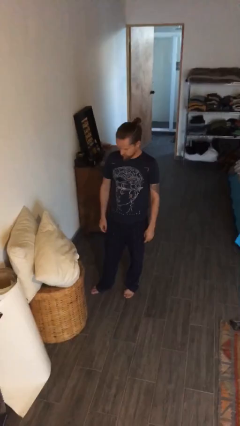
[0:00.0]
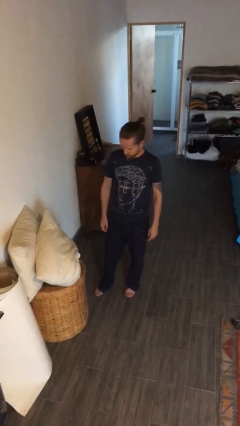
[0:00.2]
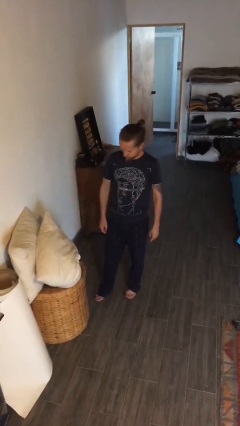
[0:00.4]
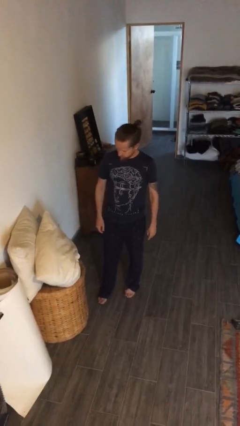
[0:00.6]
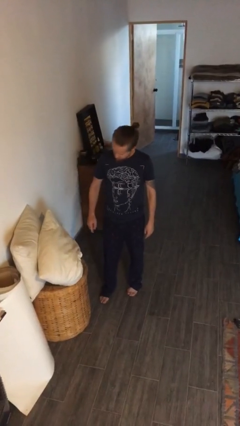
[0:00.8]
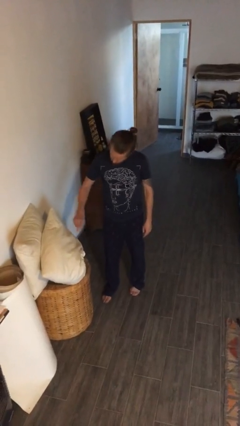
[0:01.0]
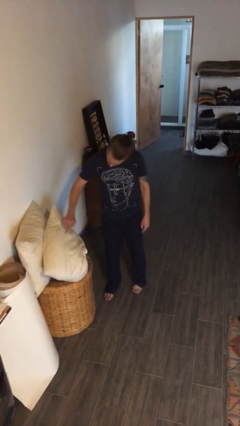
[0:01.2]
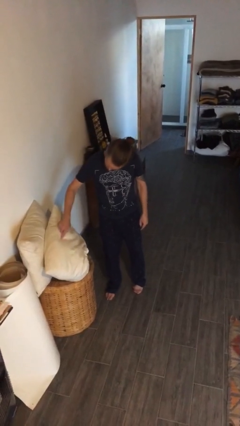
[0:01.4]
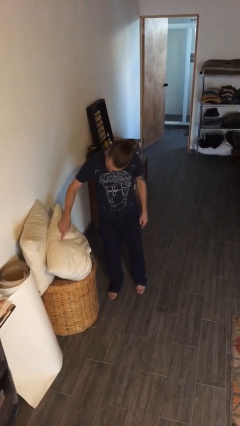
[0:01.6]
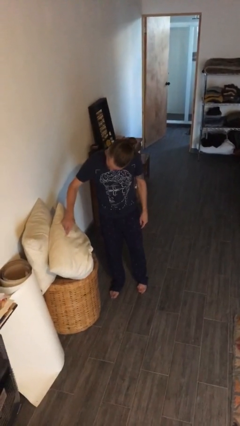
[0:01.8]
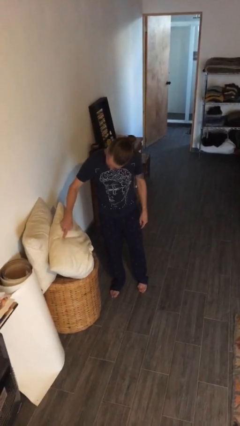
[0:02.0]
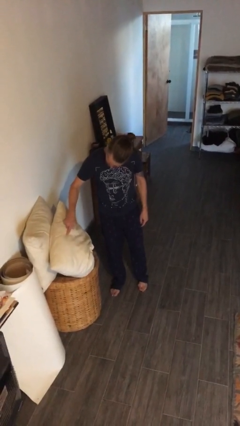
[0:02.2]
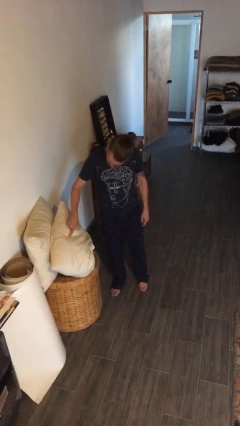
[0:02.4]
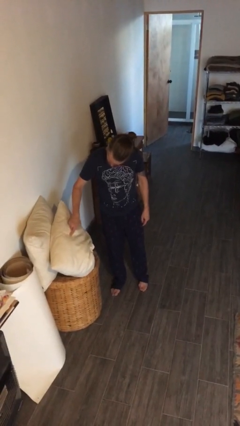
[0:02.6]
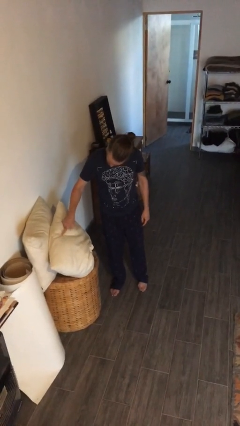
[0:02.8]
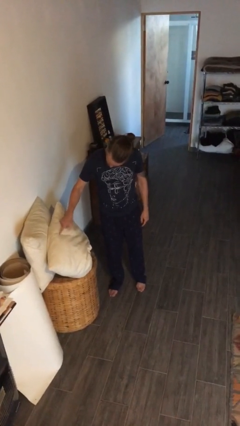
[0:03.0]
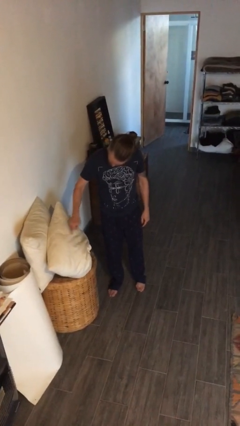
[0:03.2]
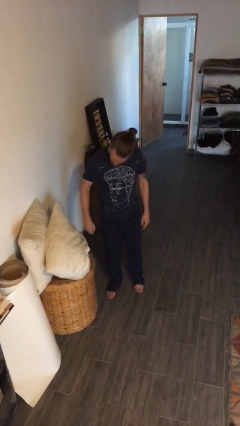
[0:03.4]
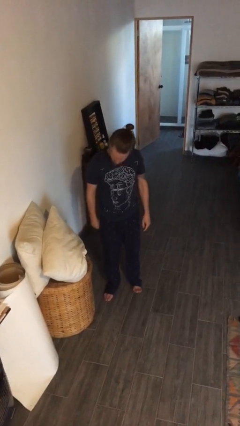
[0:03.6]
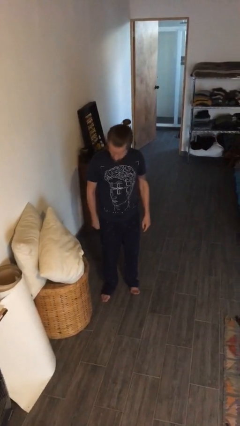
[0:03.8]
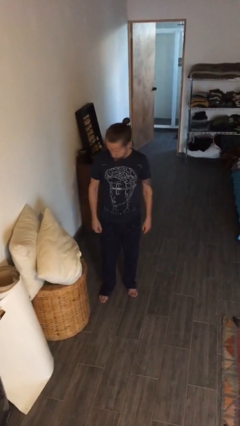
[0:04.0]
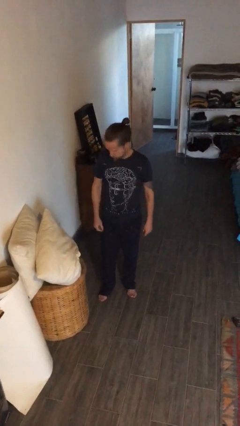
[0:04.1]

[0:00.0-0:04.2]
person taps object with finger

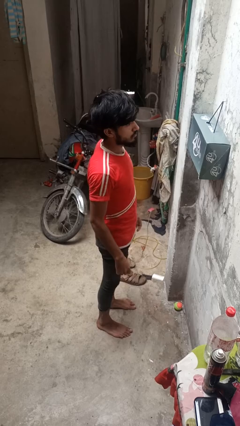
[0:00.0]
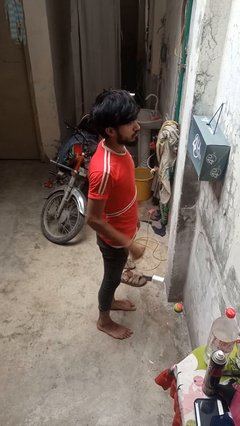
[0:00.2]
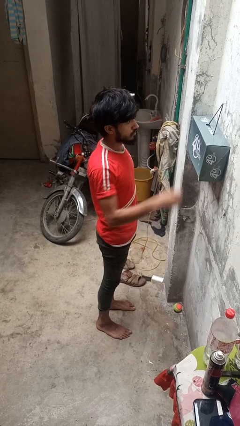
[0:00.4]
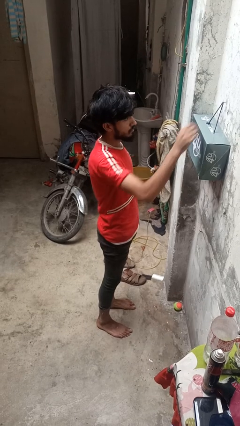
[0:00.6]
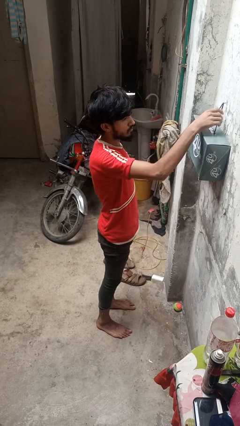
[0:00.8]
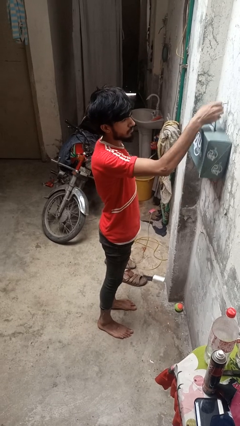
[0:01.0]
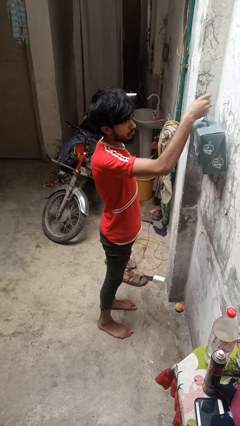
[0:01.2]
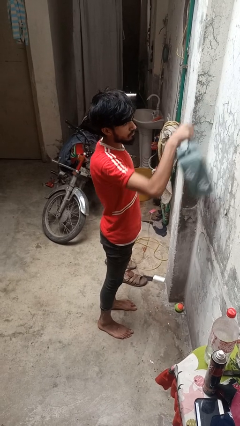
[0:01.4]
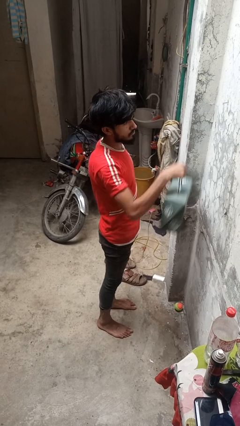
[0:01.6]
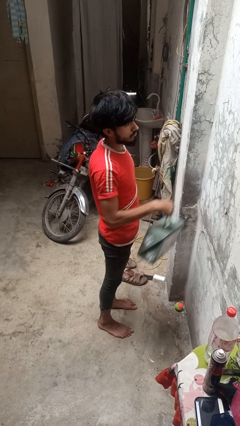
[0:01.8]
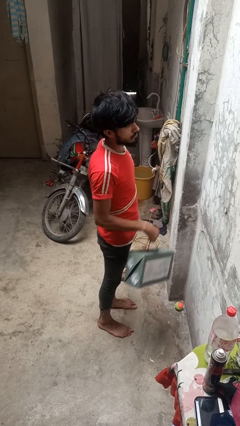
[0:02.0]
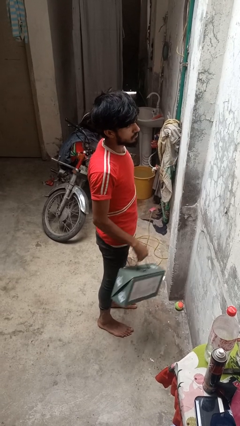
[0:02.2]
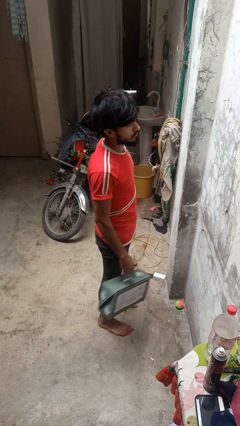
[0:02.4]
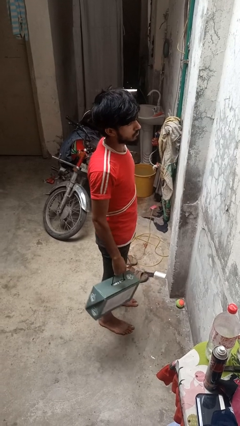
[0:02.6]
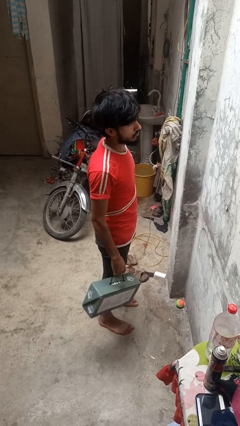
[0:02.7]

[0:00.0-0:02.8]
person takes down smoke detector

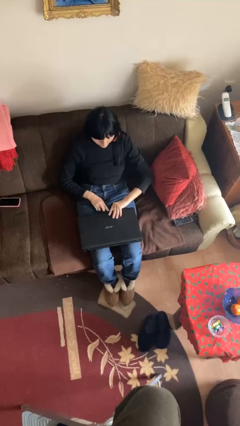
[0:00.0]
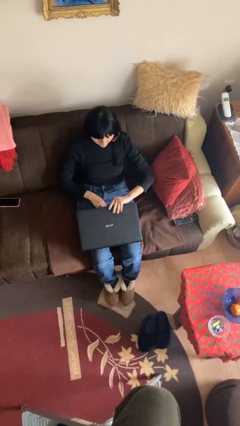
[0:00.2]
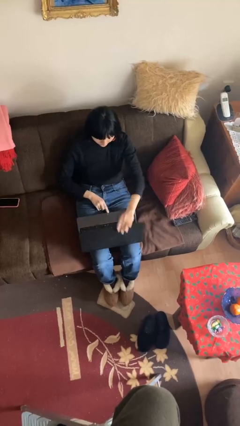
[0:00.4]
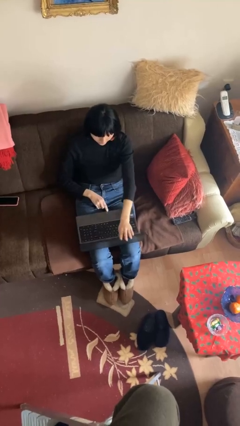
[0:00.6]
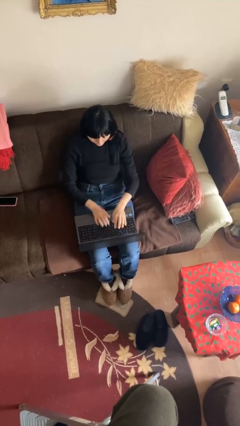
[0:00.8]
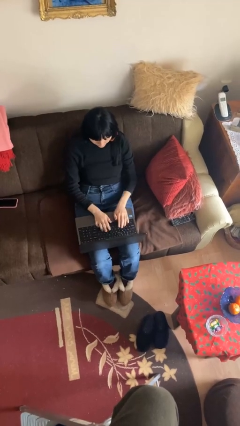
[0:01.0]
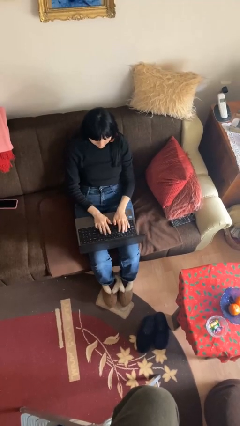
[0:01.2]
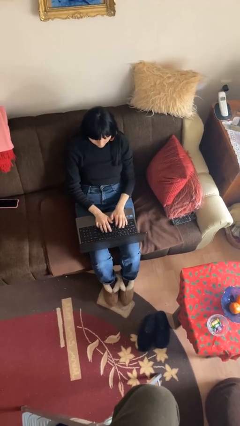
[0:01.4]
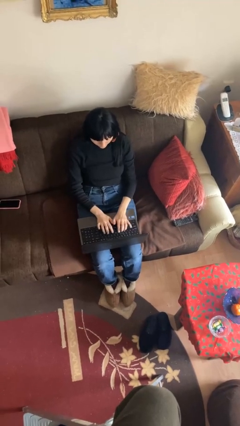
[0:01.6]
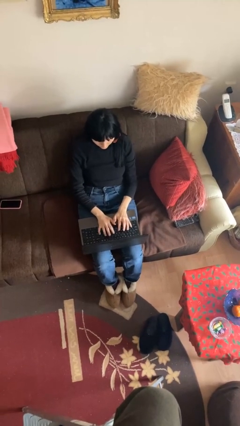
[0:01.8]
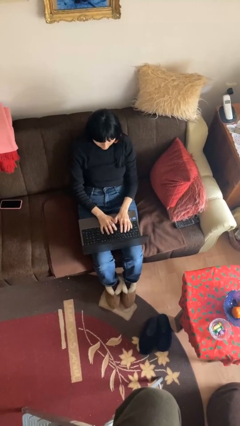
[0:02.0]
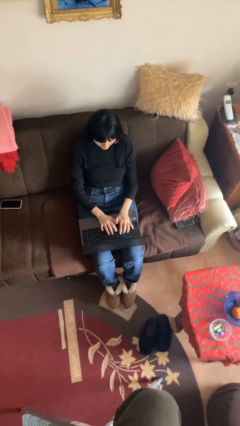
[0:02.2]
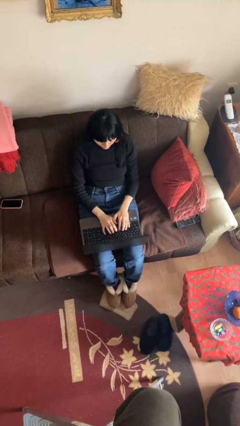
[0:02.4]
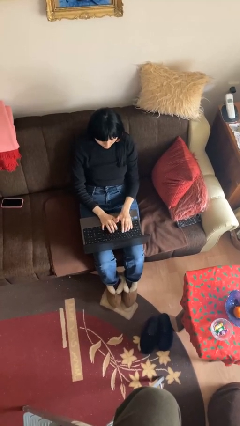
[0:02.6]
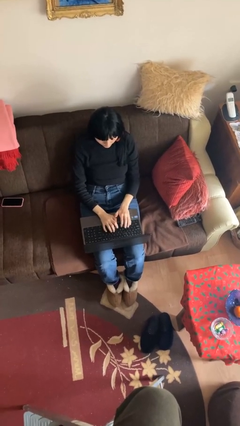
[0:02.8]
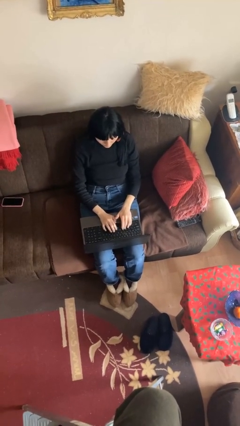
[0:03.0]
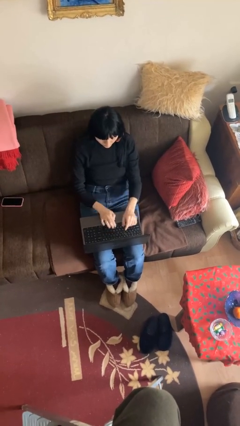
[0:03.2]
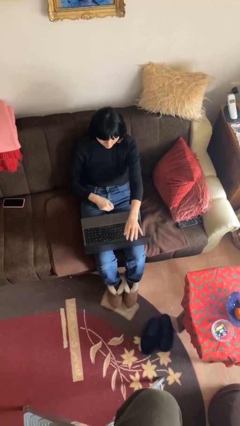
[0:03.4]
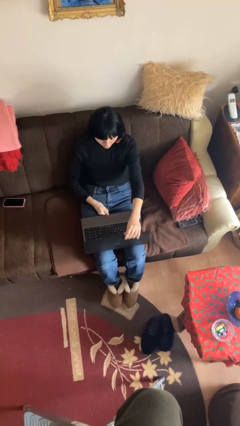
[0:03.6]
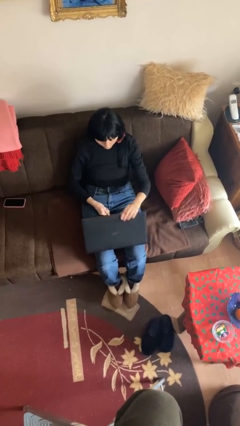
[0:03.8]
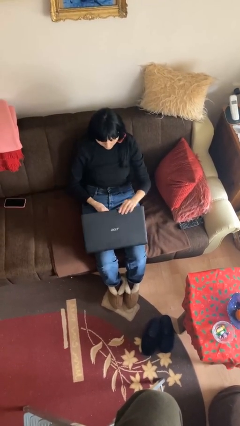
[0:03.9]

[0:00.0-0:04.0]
person interacts with laptop

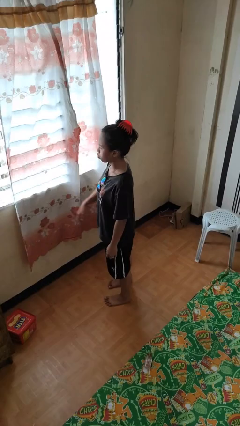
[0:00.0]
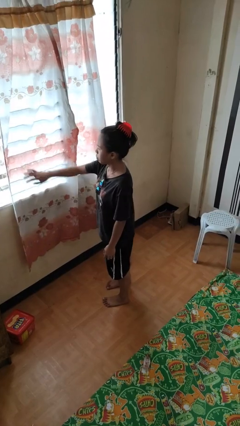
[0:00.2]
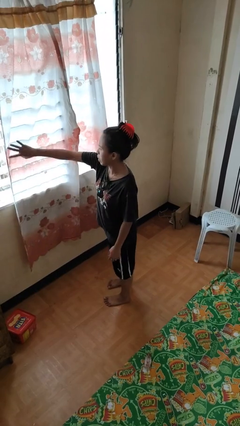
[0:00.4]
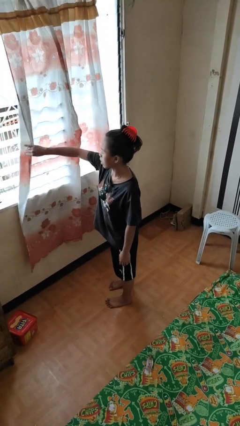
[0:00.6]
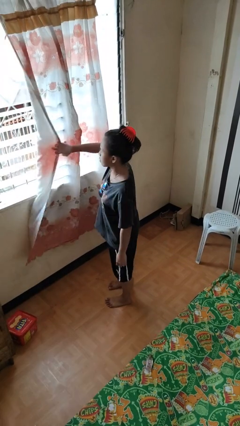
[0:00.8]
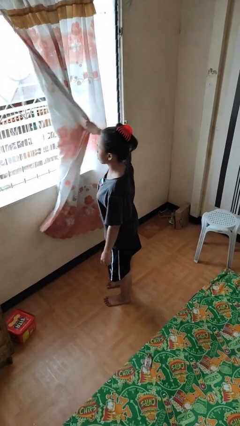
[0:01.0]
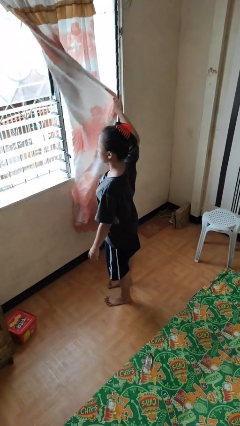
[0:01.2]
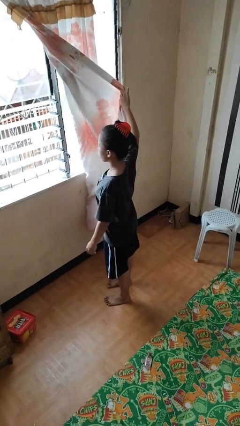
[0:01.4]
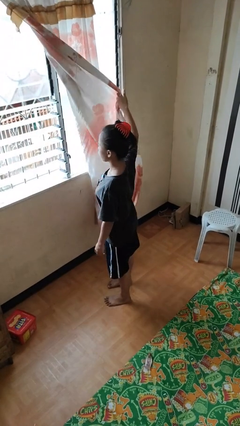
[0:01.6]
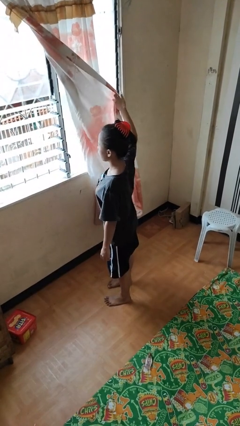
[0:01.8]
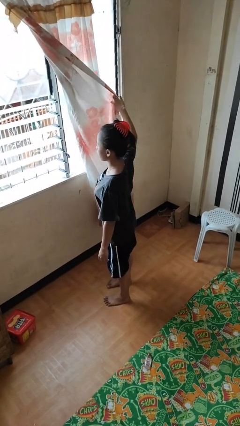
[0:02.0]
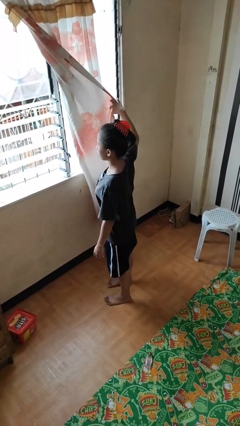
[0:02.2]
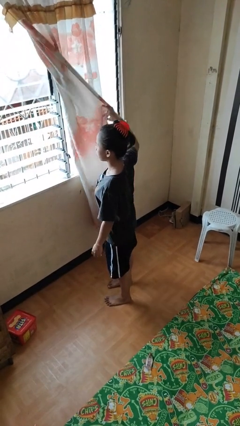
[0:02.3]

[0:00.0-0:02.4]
person opens curtains

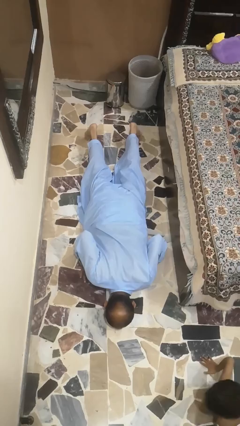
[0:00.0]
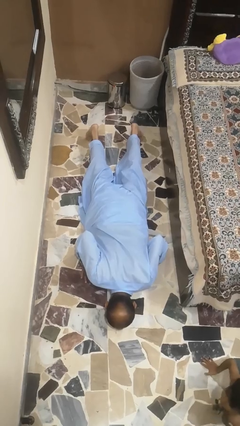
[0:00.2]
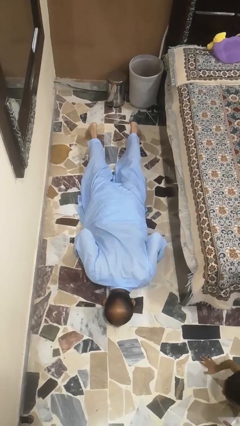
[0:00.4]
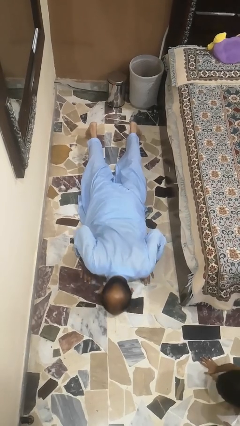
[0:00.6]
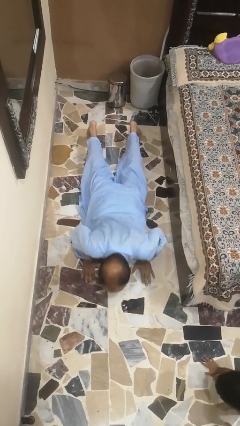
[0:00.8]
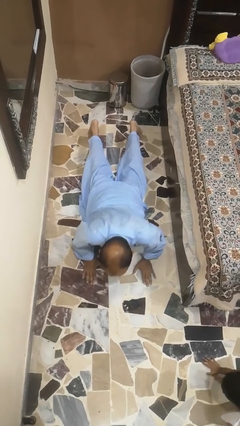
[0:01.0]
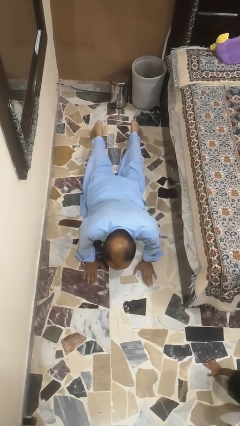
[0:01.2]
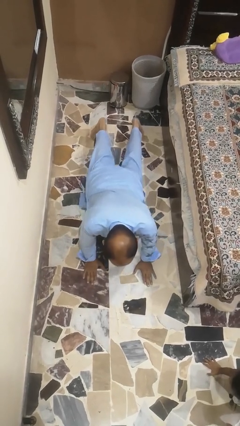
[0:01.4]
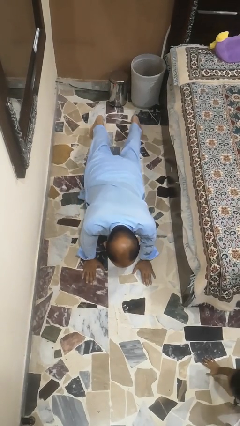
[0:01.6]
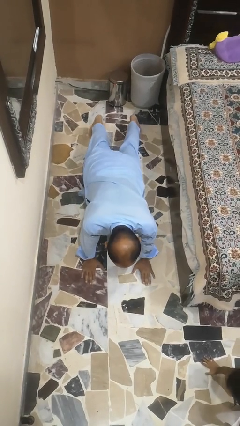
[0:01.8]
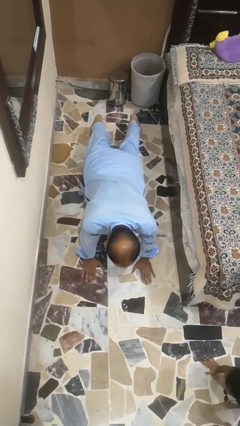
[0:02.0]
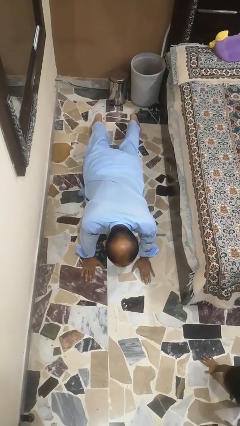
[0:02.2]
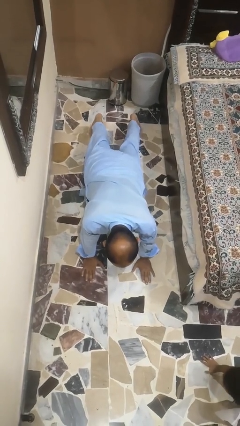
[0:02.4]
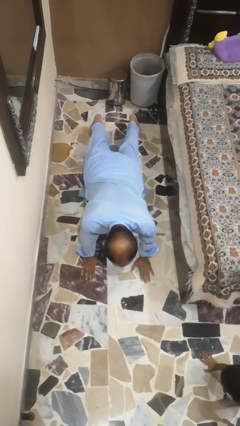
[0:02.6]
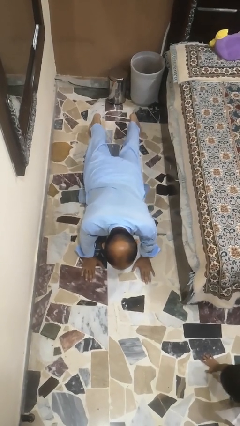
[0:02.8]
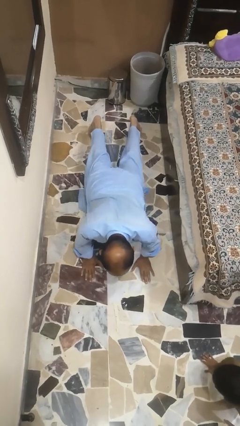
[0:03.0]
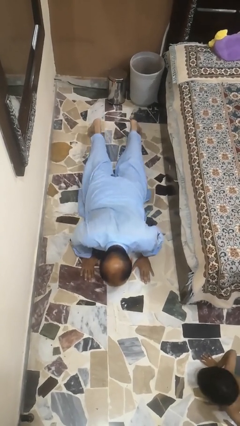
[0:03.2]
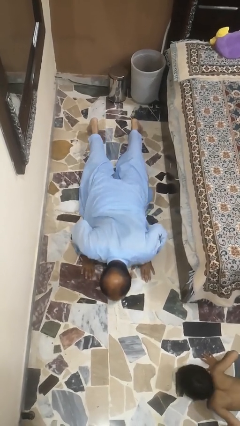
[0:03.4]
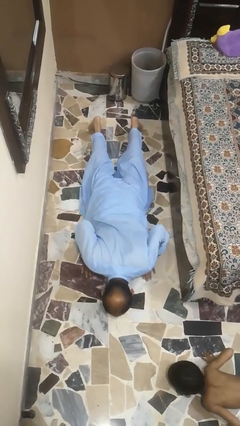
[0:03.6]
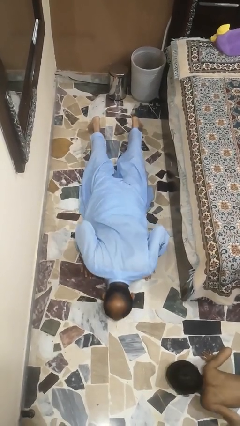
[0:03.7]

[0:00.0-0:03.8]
person exercises with pushup
